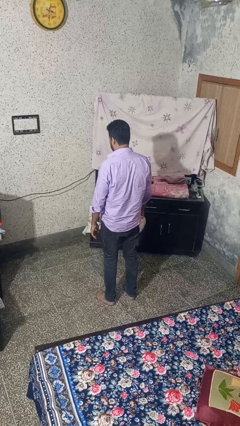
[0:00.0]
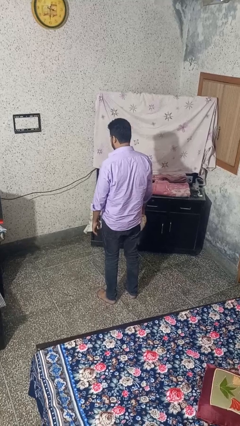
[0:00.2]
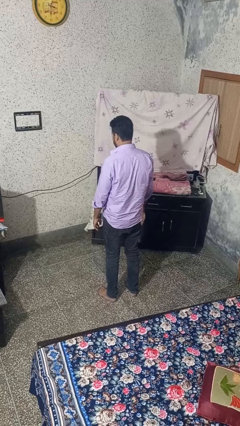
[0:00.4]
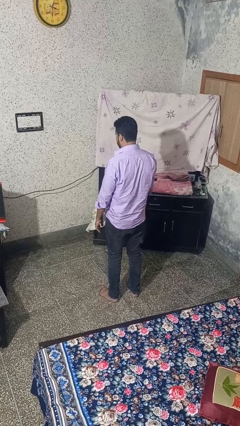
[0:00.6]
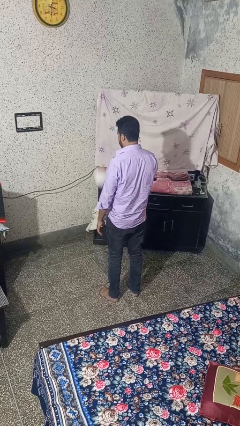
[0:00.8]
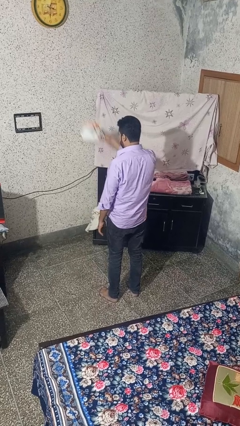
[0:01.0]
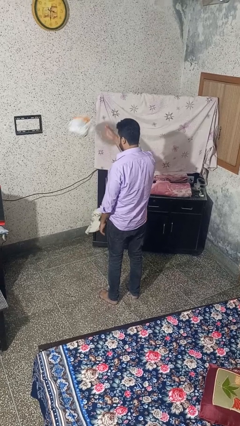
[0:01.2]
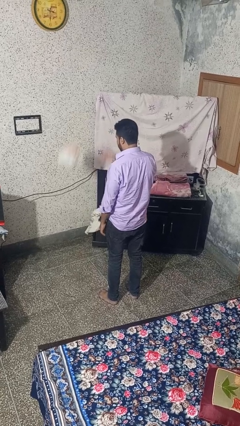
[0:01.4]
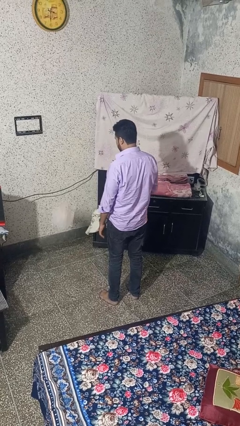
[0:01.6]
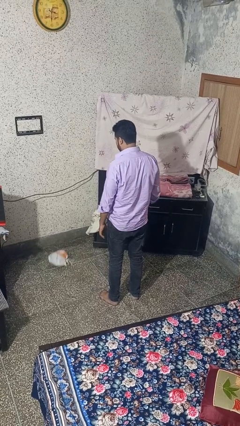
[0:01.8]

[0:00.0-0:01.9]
person throws object to ground

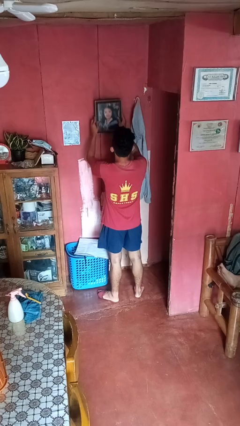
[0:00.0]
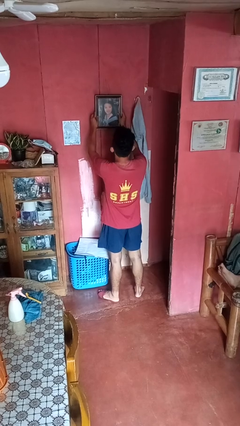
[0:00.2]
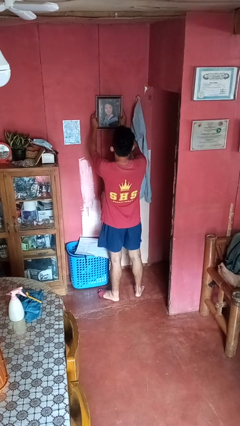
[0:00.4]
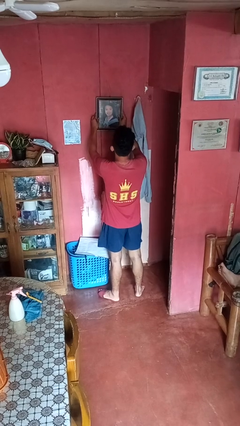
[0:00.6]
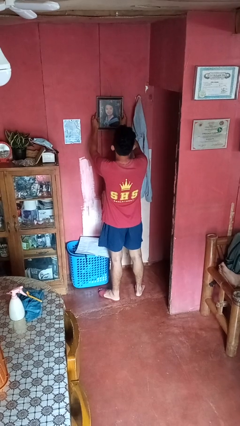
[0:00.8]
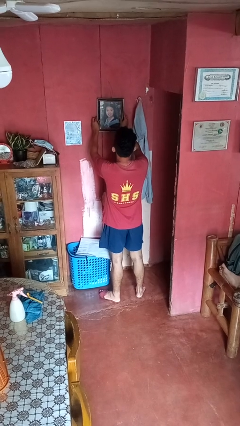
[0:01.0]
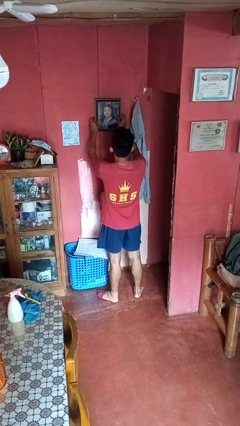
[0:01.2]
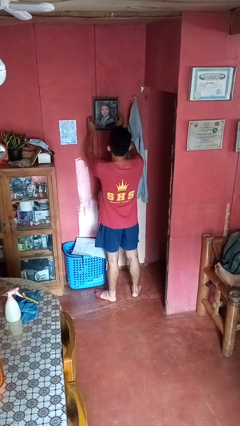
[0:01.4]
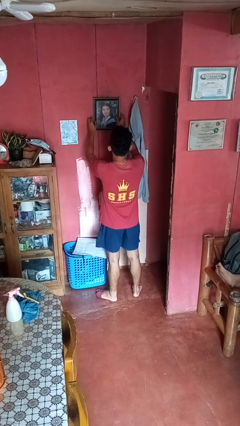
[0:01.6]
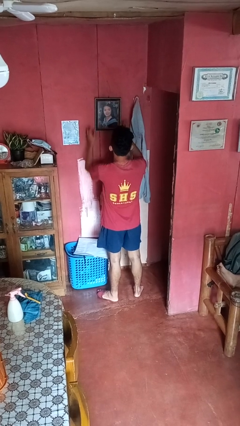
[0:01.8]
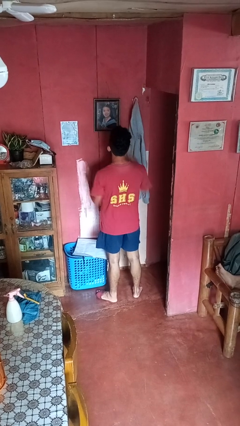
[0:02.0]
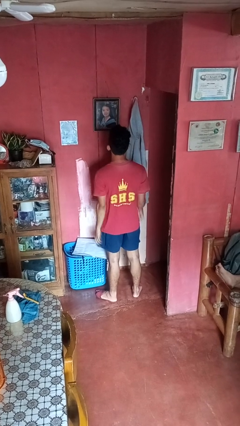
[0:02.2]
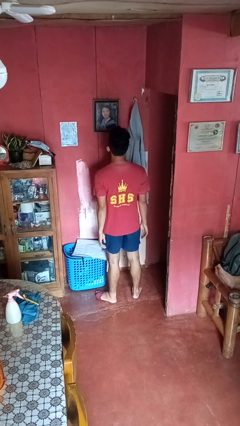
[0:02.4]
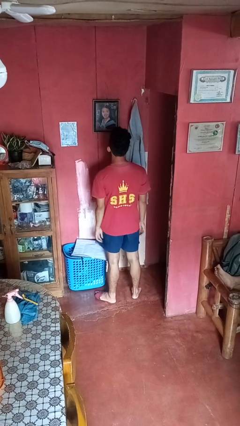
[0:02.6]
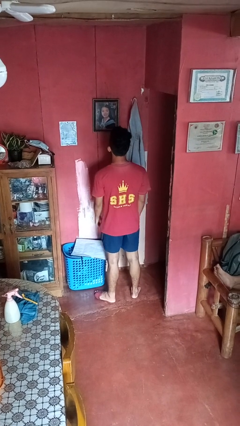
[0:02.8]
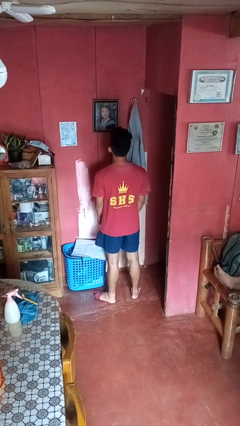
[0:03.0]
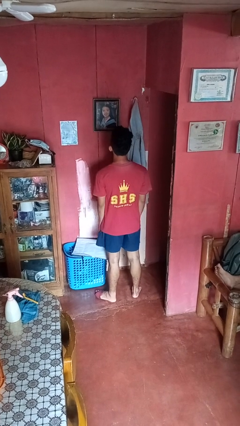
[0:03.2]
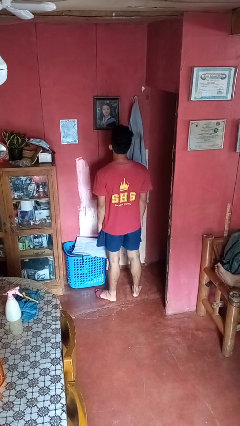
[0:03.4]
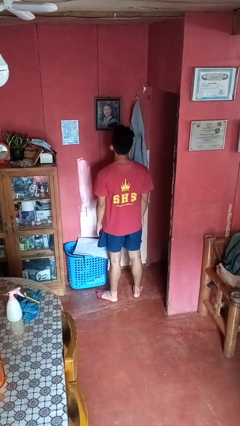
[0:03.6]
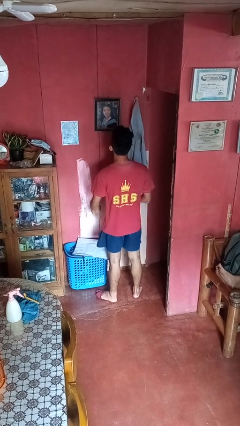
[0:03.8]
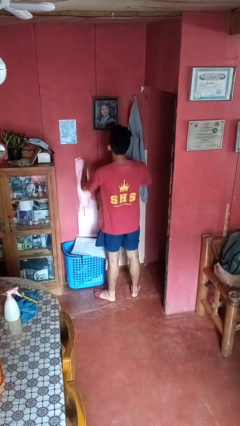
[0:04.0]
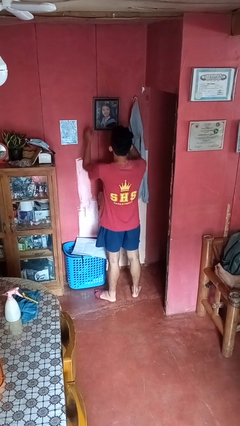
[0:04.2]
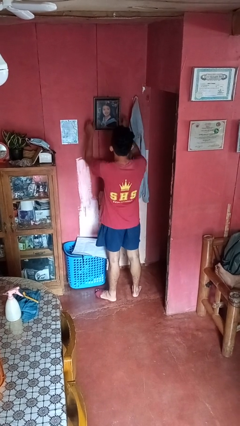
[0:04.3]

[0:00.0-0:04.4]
person puts up picture frame

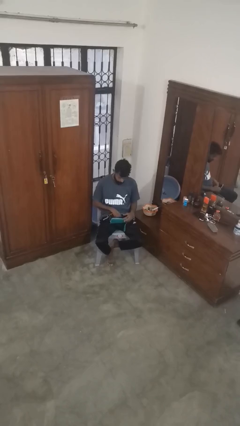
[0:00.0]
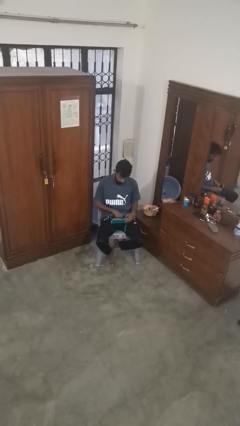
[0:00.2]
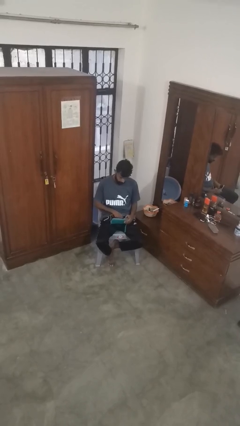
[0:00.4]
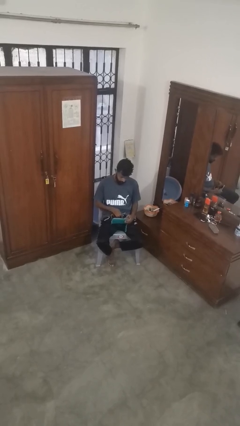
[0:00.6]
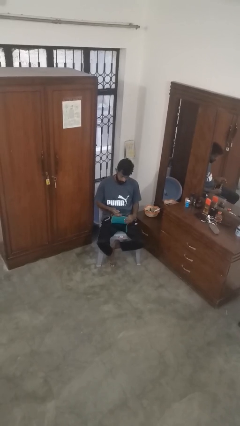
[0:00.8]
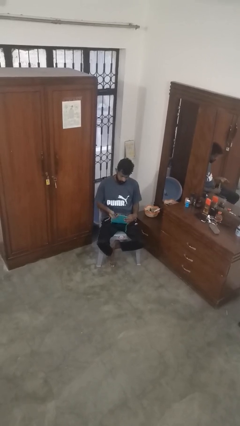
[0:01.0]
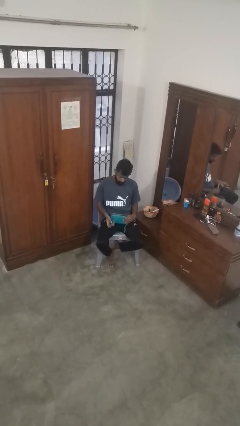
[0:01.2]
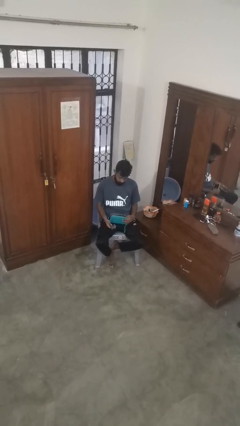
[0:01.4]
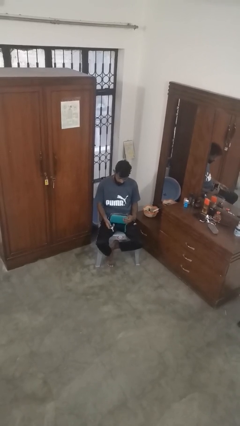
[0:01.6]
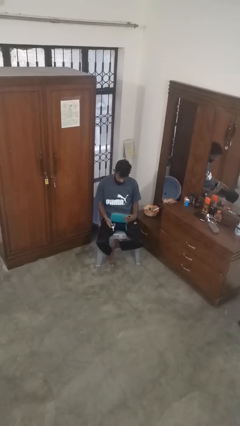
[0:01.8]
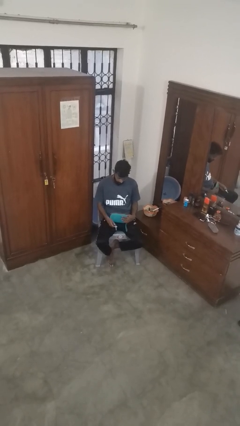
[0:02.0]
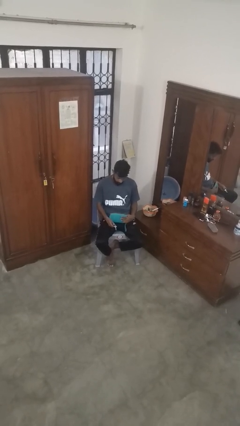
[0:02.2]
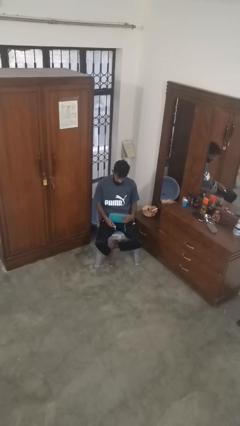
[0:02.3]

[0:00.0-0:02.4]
person takes object from purse

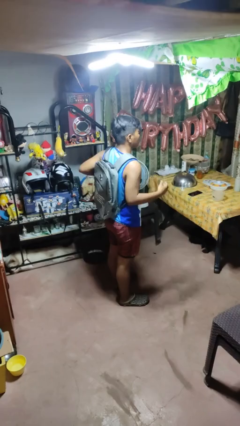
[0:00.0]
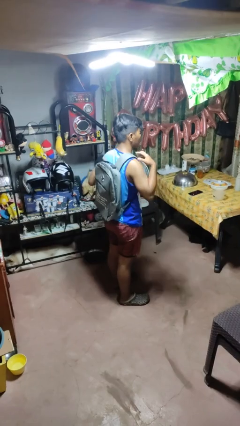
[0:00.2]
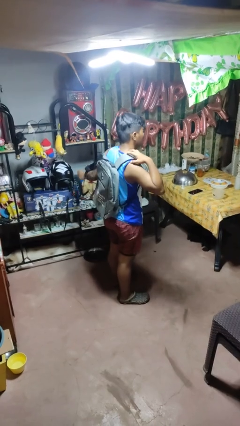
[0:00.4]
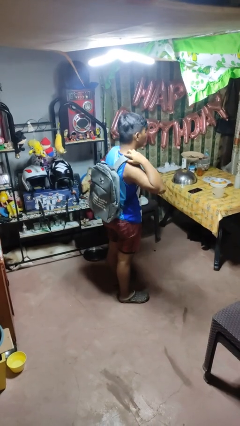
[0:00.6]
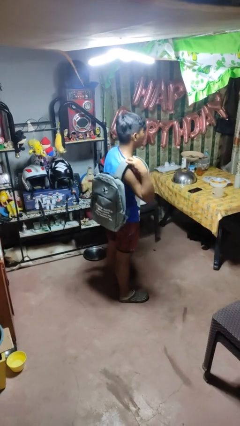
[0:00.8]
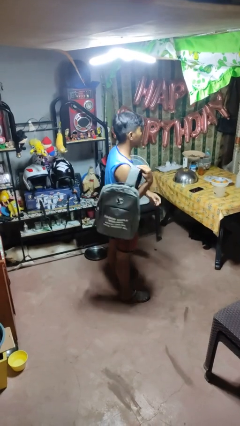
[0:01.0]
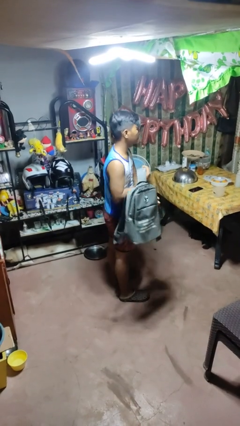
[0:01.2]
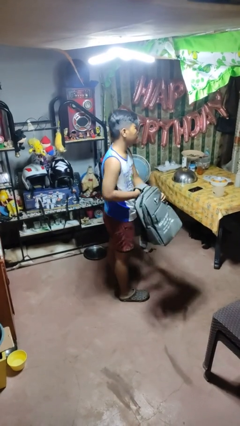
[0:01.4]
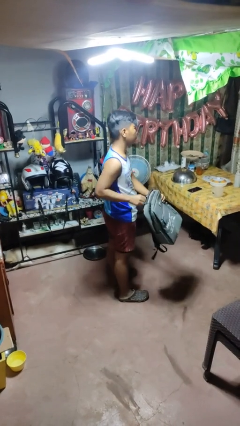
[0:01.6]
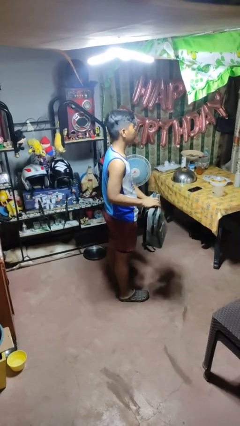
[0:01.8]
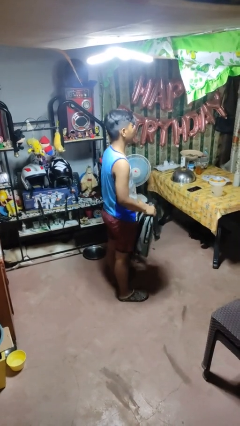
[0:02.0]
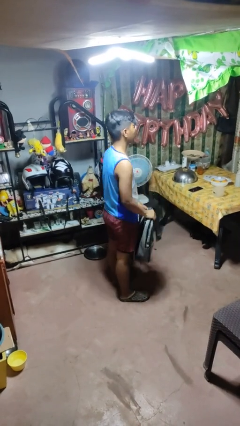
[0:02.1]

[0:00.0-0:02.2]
person takes off backpack

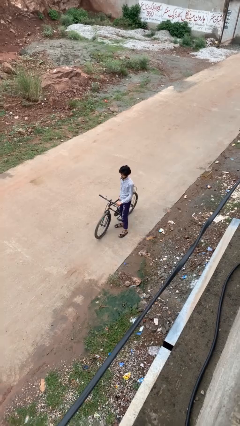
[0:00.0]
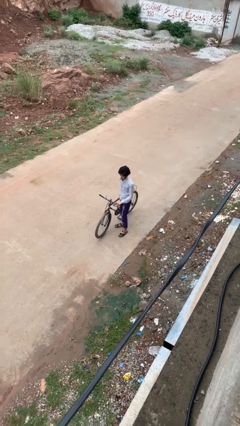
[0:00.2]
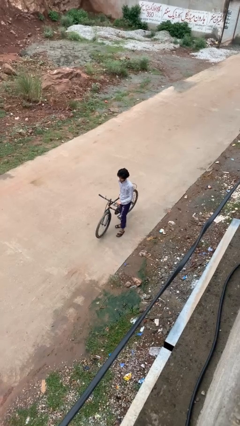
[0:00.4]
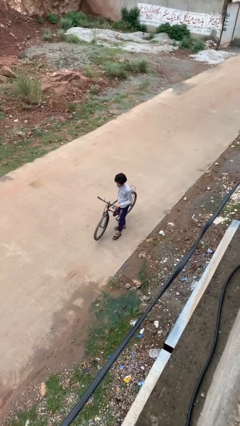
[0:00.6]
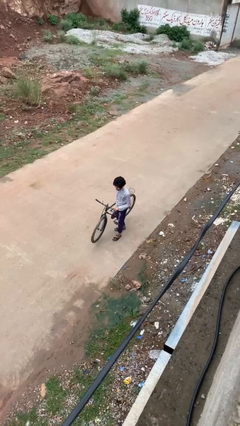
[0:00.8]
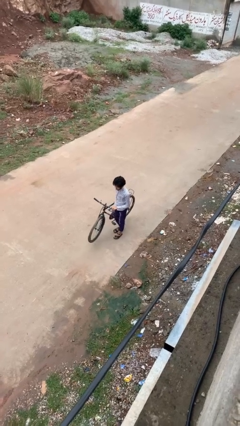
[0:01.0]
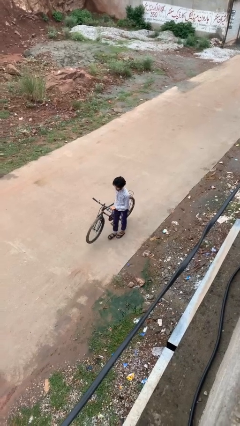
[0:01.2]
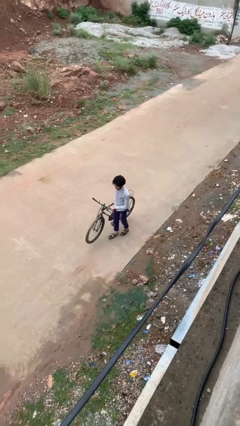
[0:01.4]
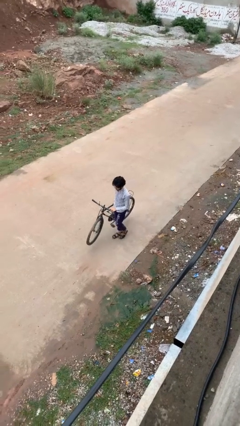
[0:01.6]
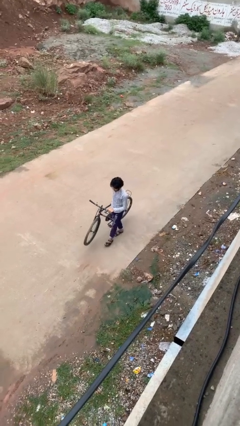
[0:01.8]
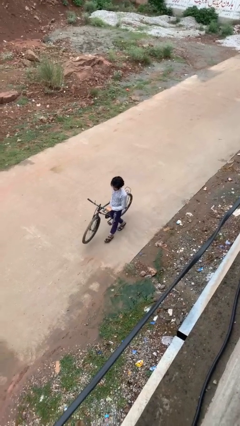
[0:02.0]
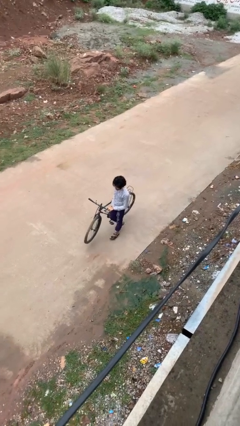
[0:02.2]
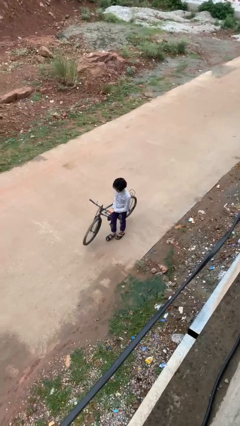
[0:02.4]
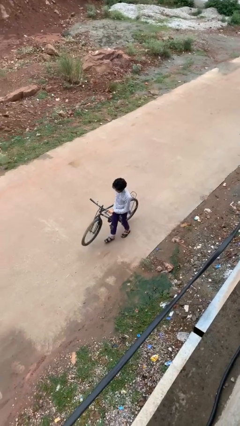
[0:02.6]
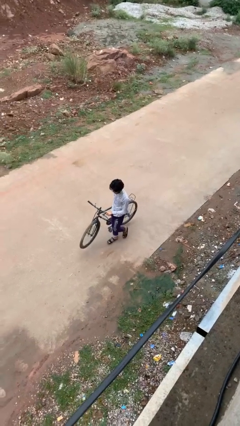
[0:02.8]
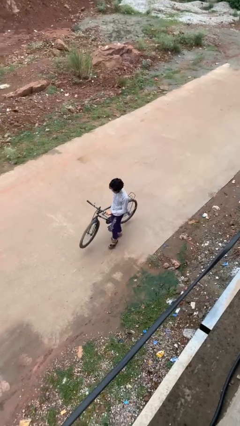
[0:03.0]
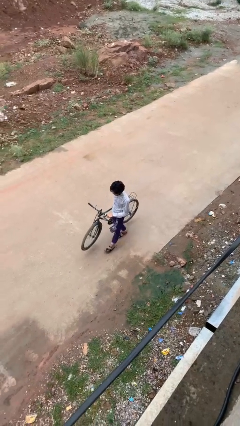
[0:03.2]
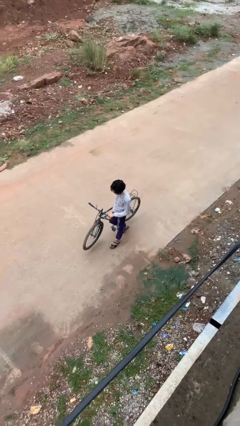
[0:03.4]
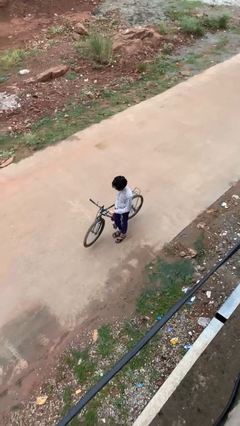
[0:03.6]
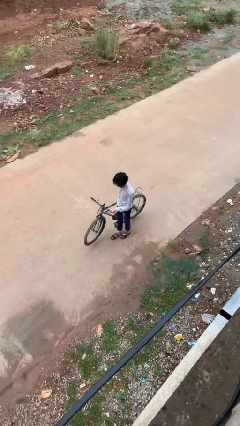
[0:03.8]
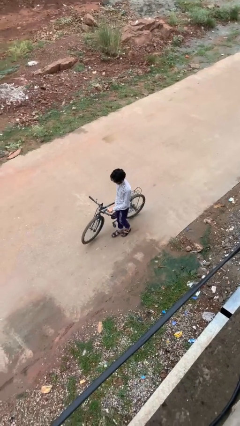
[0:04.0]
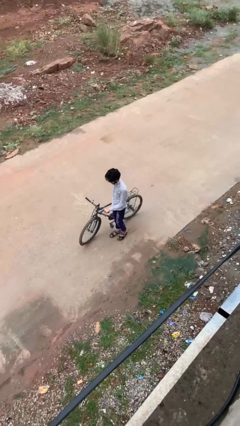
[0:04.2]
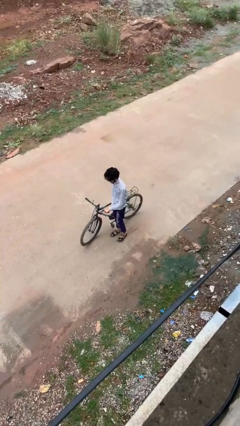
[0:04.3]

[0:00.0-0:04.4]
person carries bicycle

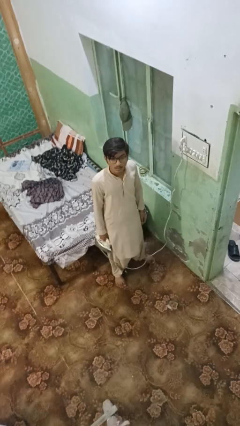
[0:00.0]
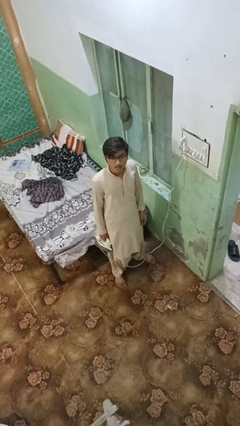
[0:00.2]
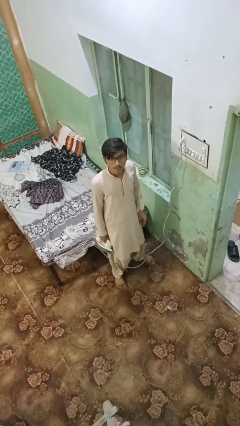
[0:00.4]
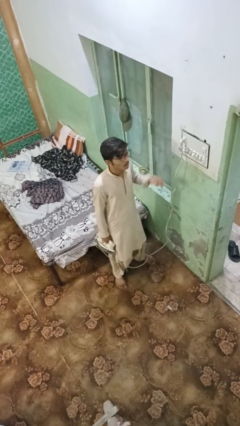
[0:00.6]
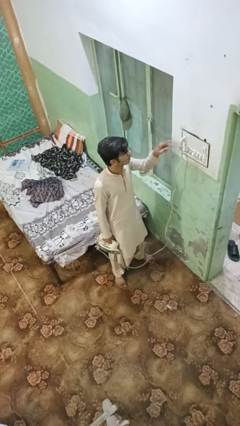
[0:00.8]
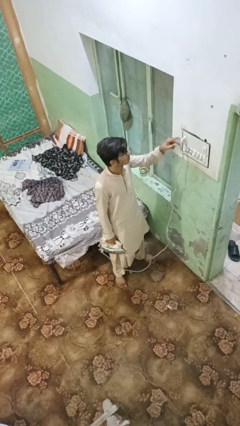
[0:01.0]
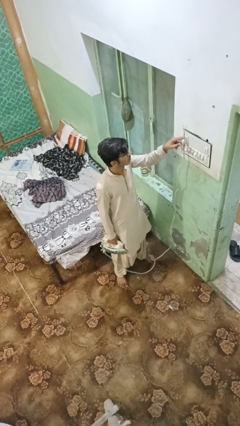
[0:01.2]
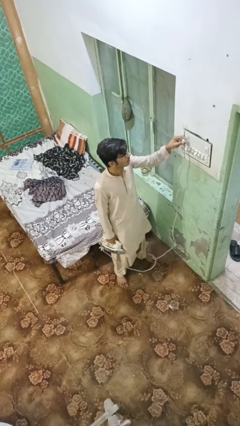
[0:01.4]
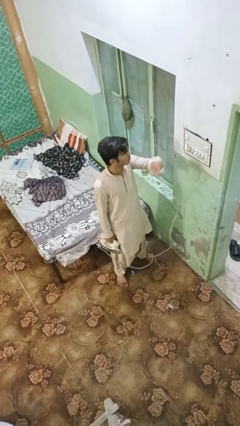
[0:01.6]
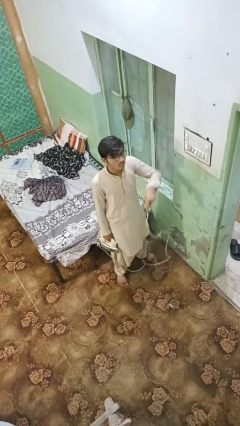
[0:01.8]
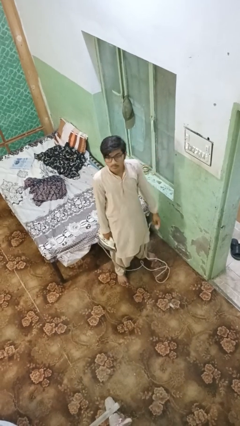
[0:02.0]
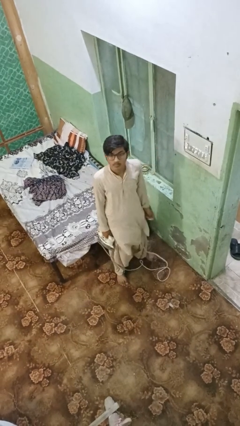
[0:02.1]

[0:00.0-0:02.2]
person unplugs from electrical socket

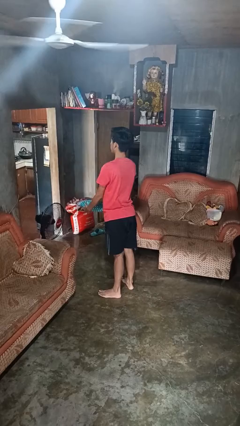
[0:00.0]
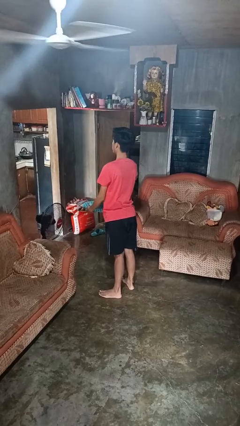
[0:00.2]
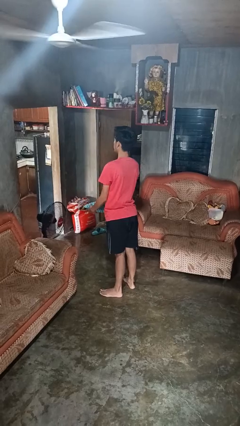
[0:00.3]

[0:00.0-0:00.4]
person catches dropped object
